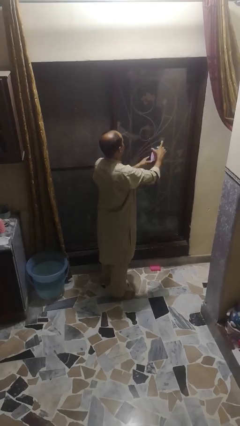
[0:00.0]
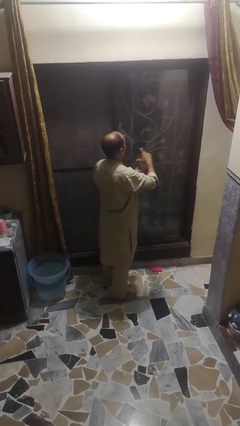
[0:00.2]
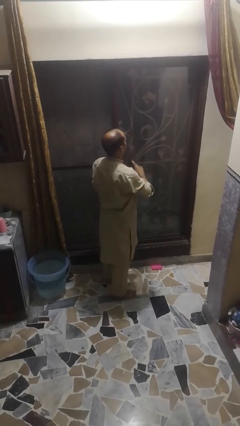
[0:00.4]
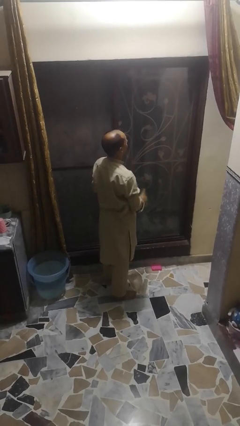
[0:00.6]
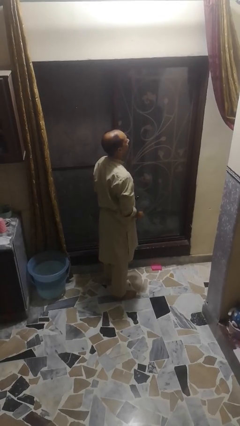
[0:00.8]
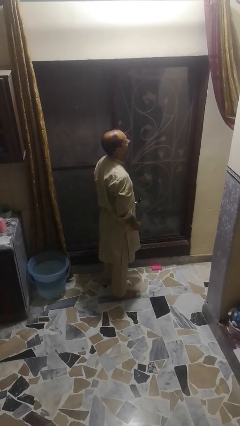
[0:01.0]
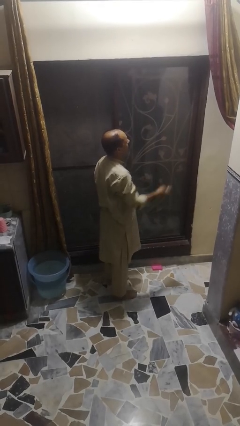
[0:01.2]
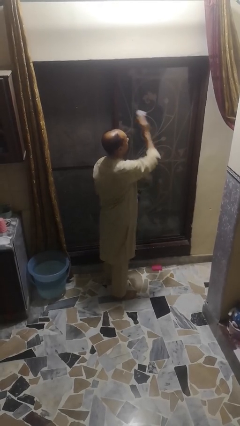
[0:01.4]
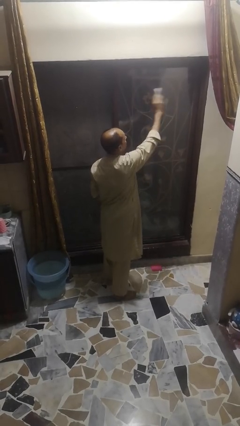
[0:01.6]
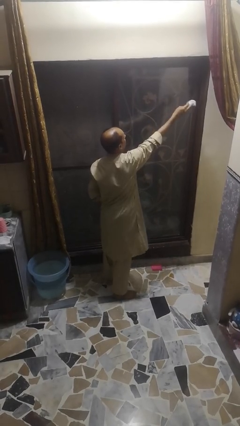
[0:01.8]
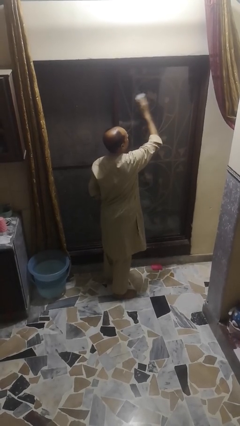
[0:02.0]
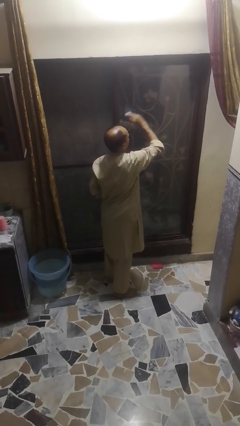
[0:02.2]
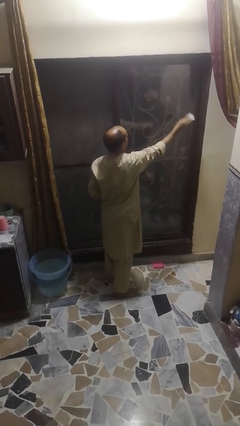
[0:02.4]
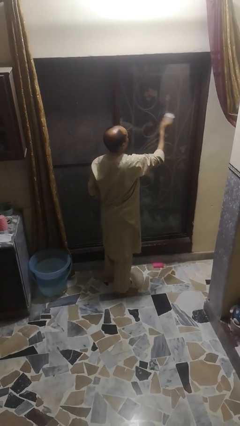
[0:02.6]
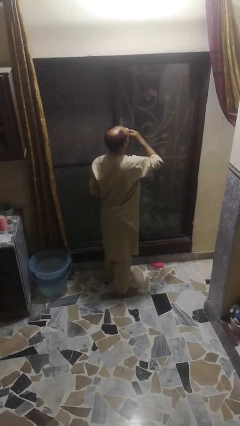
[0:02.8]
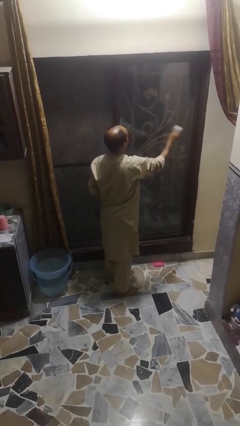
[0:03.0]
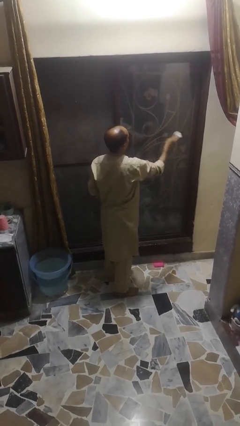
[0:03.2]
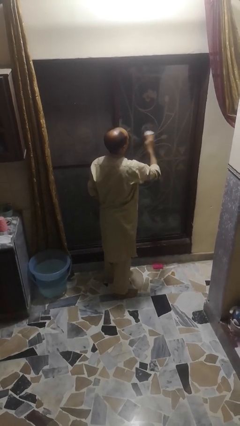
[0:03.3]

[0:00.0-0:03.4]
person washes window

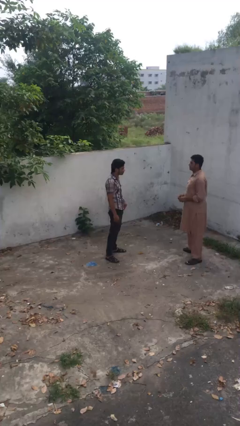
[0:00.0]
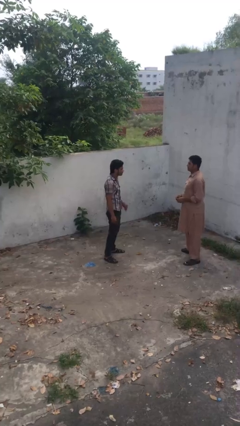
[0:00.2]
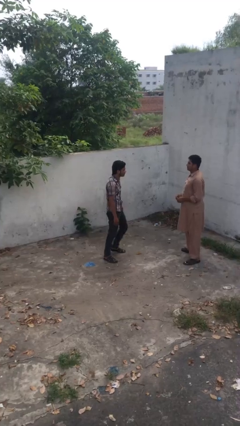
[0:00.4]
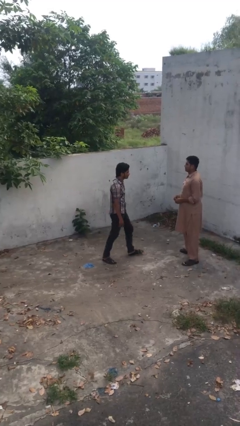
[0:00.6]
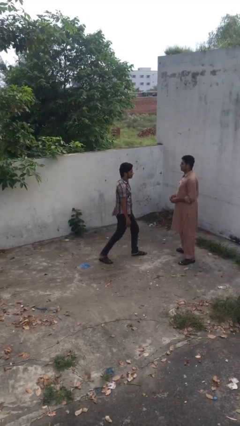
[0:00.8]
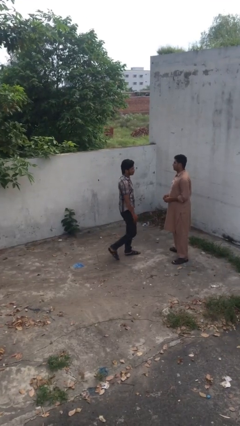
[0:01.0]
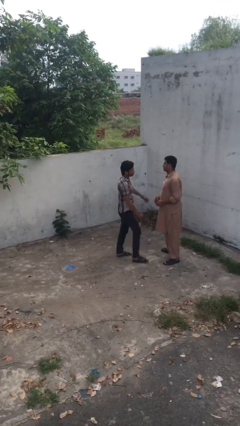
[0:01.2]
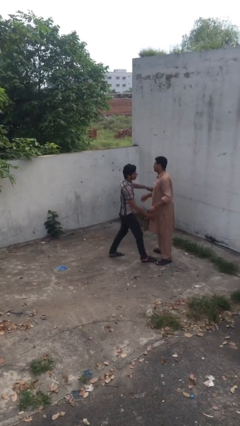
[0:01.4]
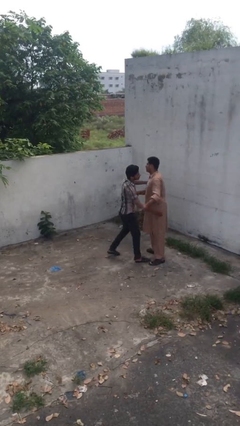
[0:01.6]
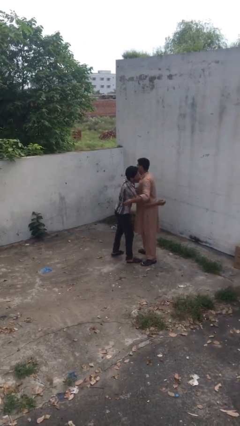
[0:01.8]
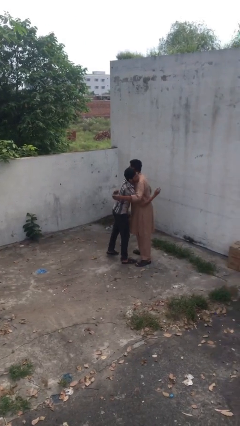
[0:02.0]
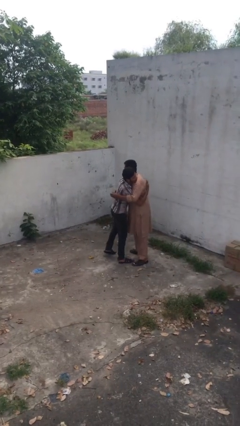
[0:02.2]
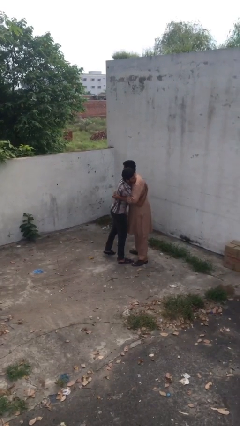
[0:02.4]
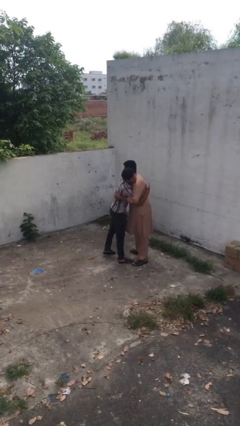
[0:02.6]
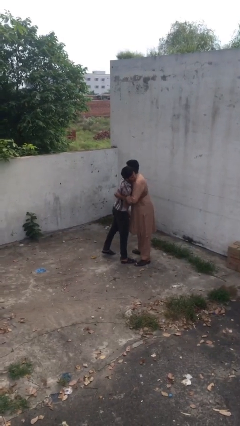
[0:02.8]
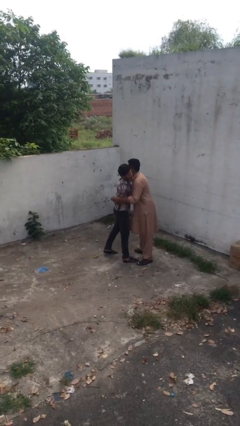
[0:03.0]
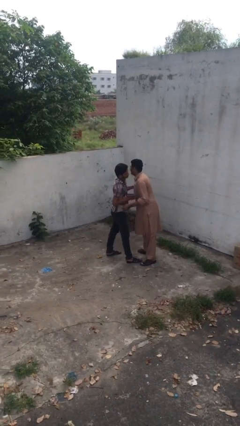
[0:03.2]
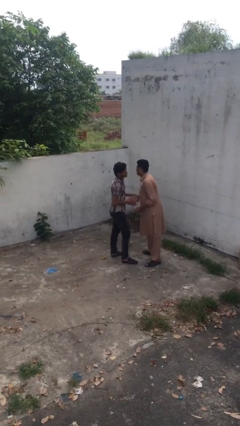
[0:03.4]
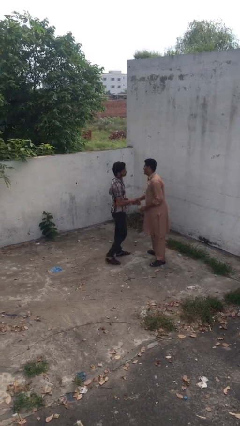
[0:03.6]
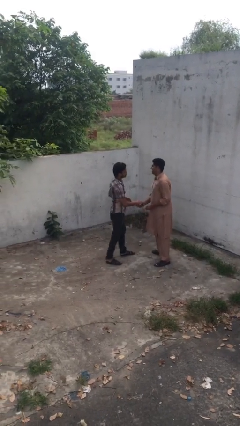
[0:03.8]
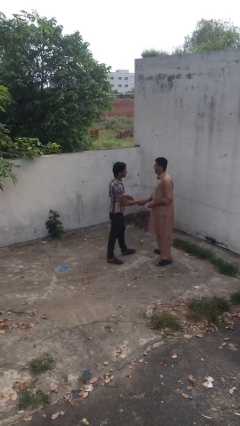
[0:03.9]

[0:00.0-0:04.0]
person embraces person

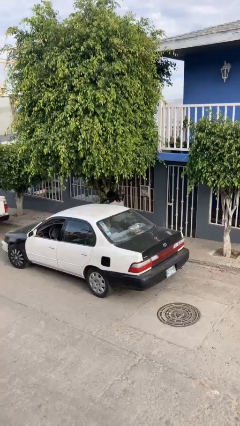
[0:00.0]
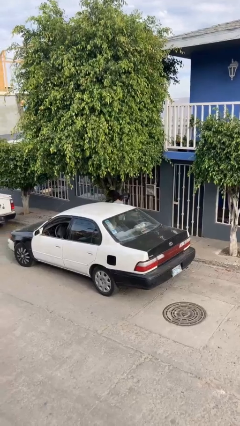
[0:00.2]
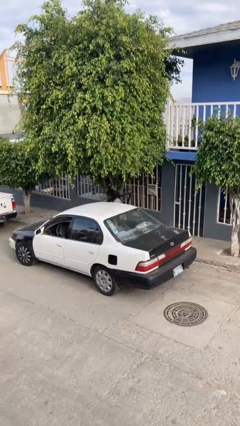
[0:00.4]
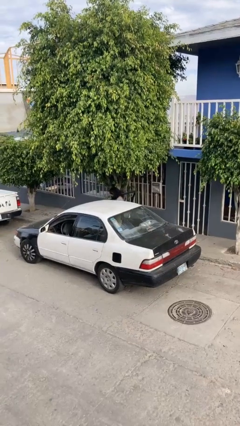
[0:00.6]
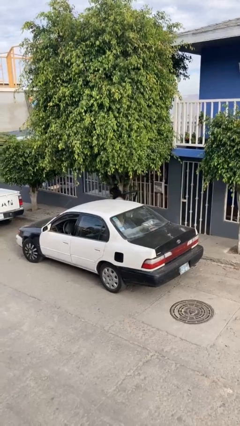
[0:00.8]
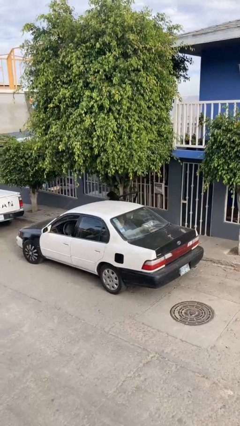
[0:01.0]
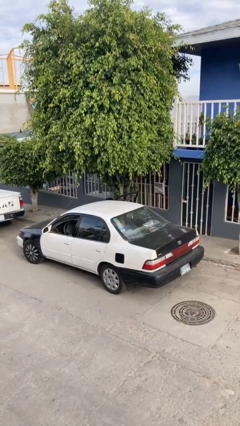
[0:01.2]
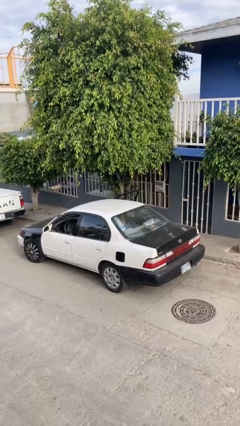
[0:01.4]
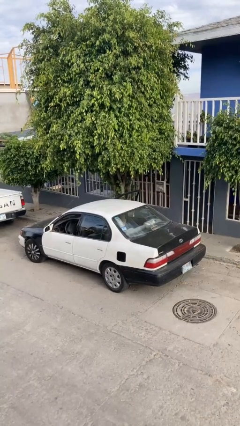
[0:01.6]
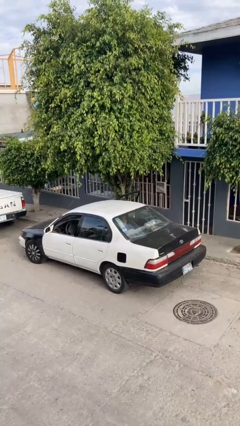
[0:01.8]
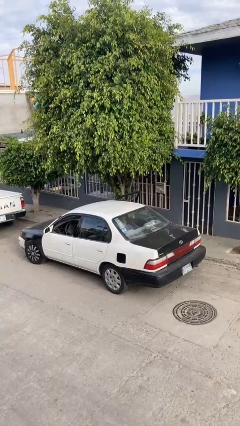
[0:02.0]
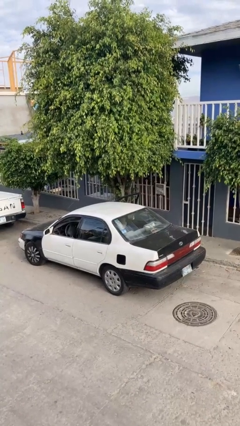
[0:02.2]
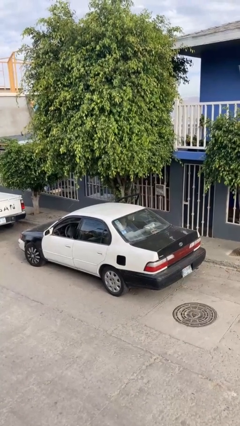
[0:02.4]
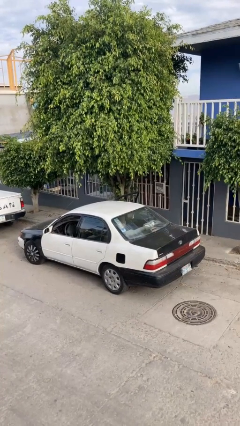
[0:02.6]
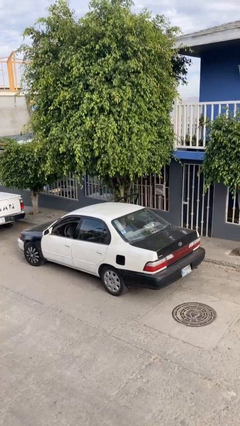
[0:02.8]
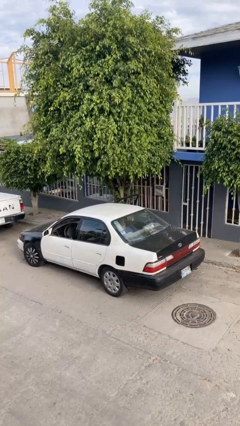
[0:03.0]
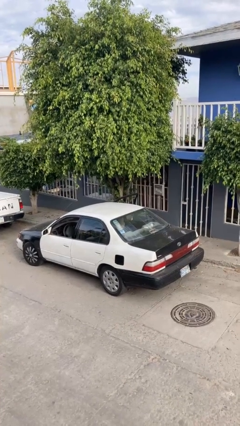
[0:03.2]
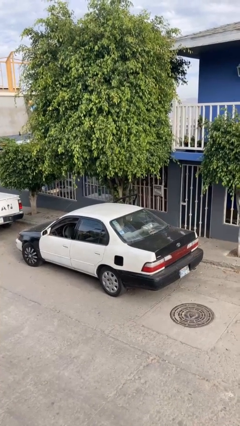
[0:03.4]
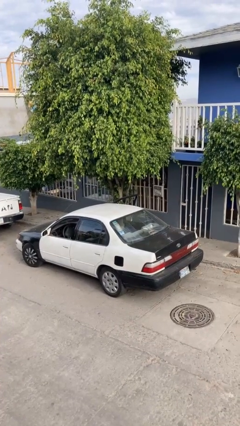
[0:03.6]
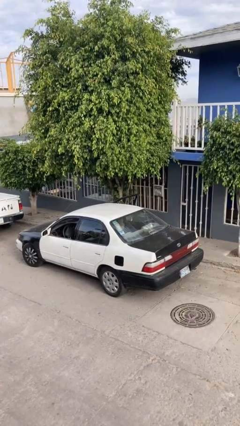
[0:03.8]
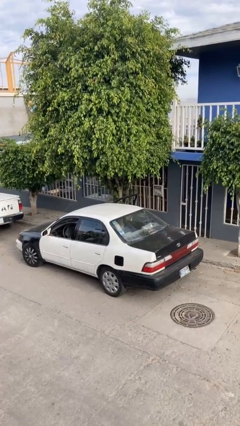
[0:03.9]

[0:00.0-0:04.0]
person enters car

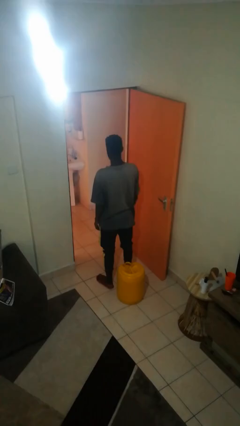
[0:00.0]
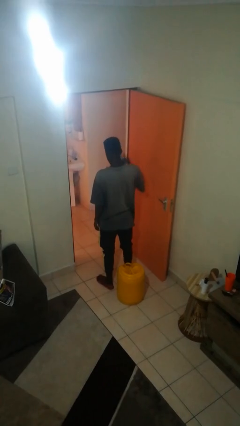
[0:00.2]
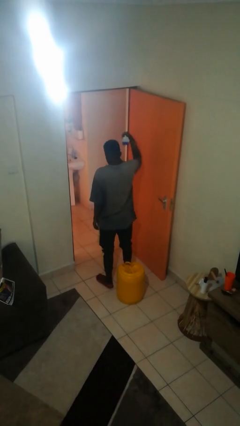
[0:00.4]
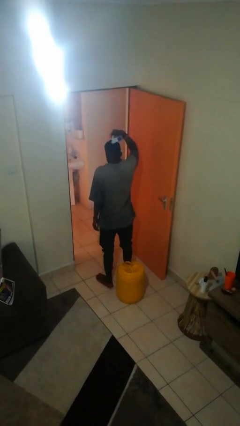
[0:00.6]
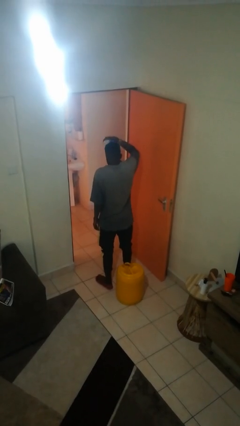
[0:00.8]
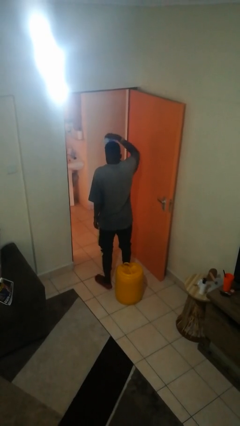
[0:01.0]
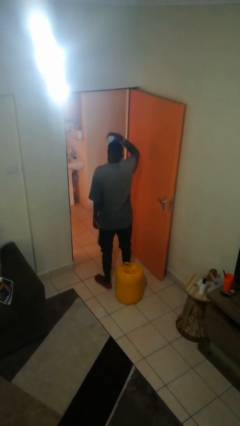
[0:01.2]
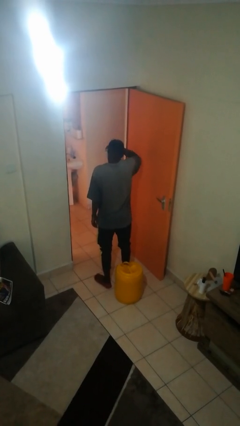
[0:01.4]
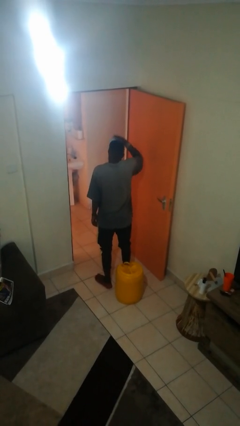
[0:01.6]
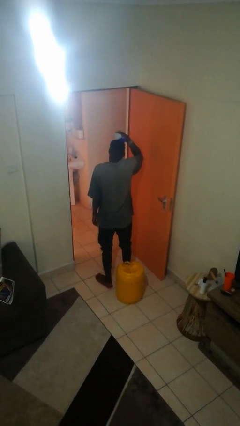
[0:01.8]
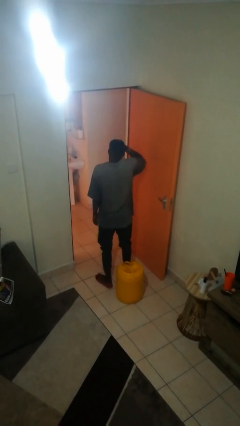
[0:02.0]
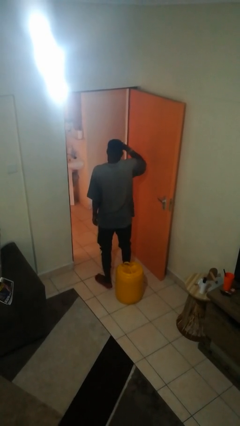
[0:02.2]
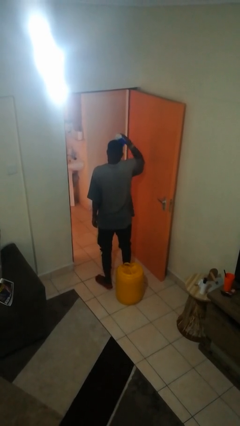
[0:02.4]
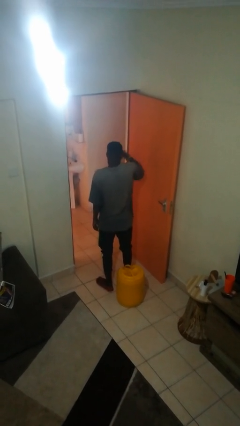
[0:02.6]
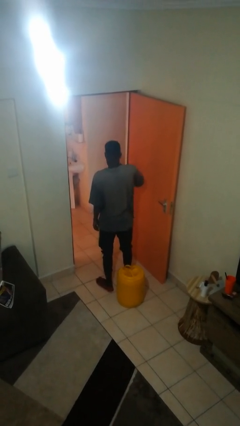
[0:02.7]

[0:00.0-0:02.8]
person brushes hair

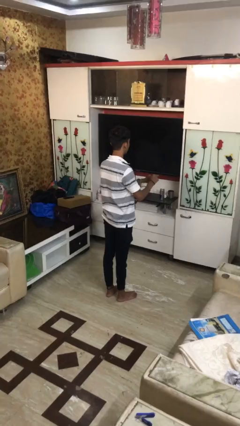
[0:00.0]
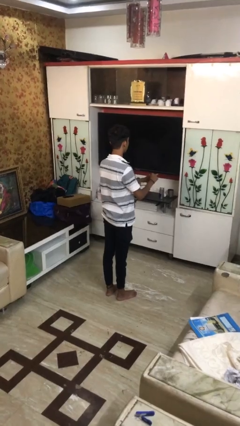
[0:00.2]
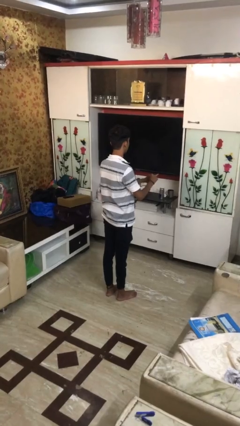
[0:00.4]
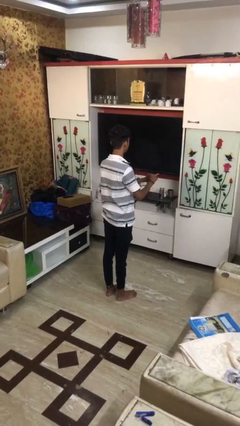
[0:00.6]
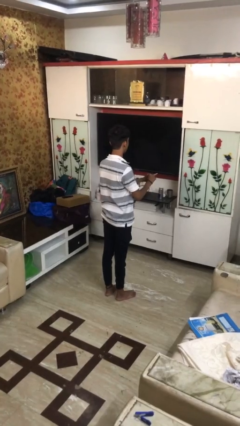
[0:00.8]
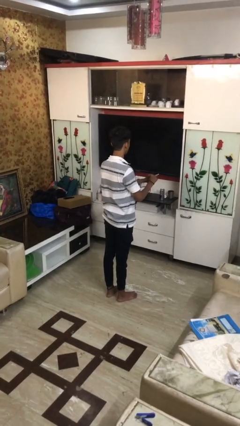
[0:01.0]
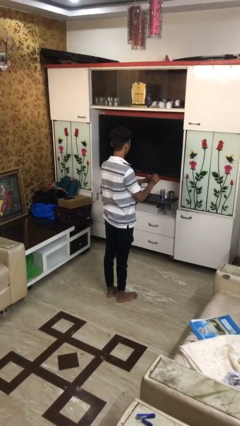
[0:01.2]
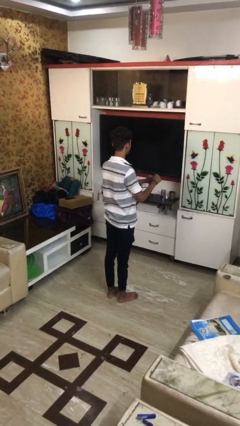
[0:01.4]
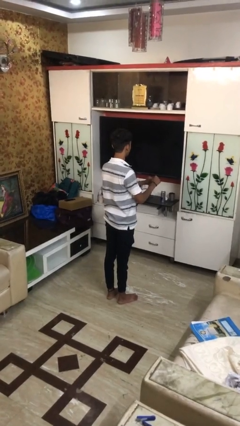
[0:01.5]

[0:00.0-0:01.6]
person files fingernails

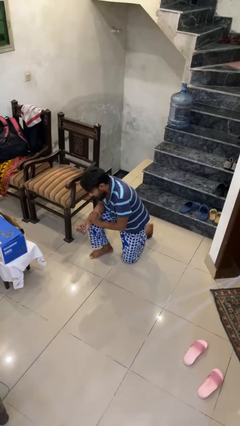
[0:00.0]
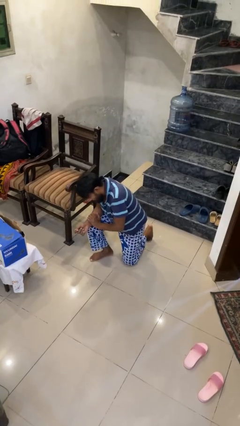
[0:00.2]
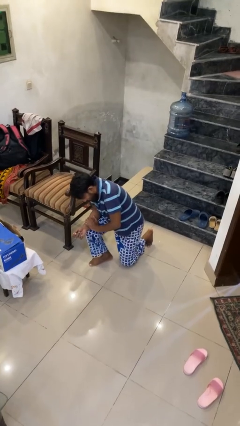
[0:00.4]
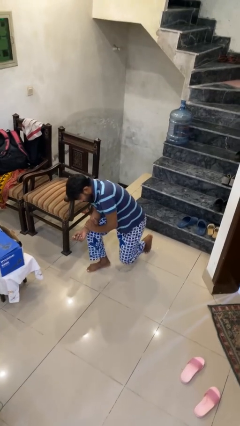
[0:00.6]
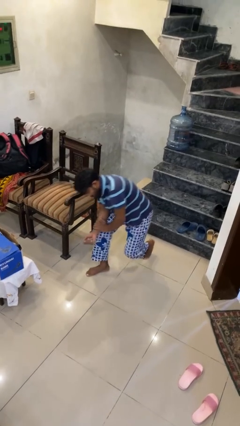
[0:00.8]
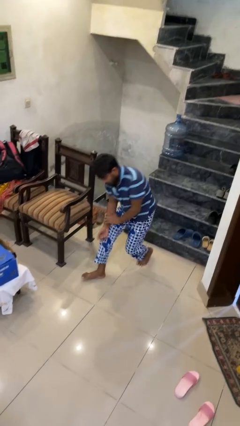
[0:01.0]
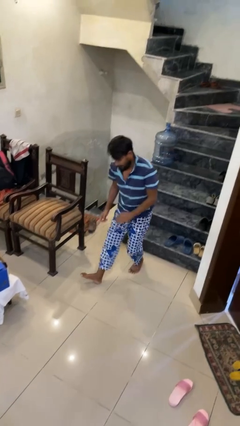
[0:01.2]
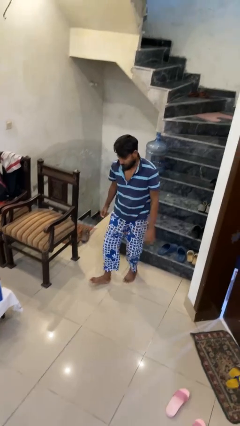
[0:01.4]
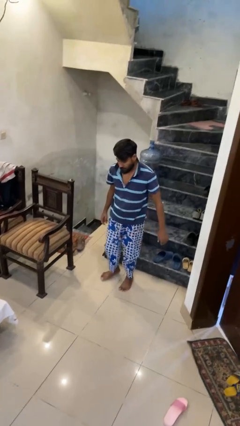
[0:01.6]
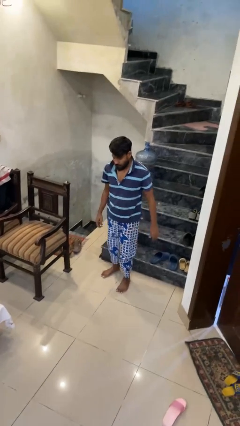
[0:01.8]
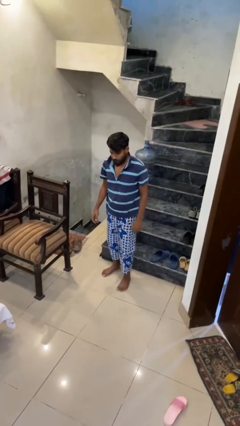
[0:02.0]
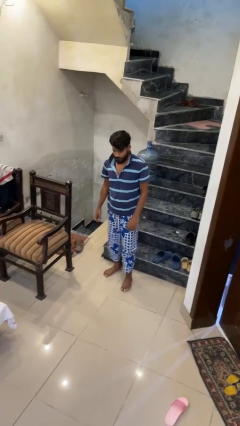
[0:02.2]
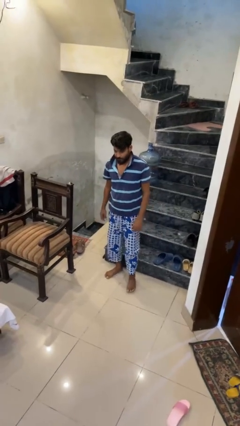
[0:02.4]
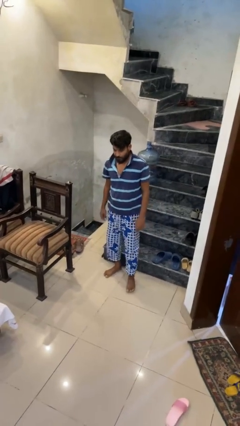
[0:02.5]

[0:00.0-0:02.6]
person stands up from floor
